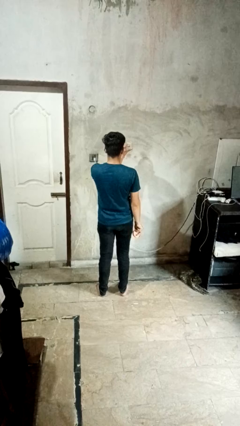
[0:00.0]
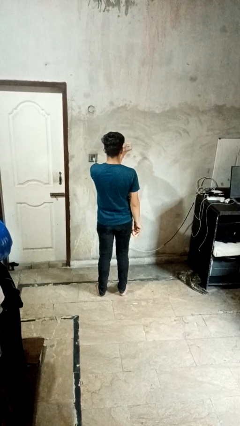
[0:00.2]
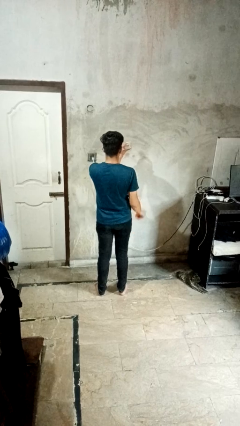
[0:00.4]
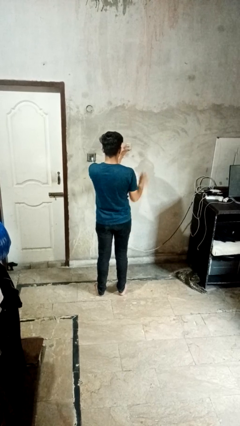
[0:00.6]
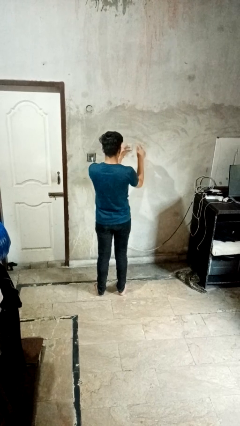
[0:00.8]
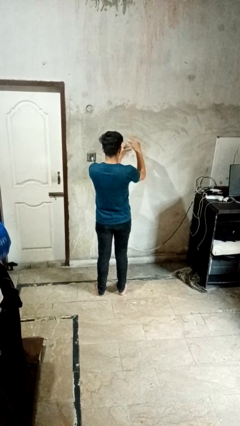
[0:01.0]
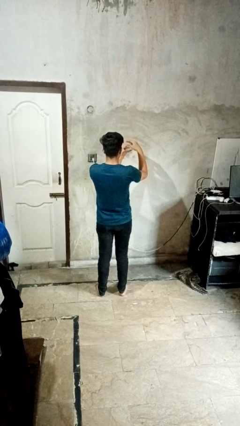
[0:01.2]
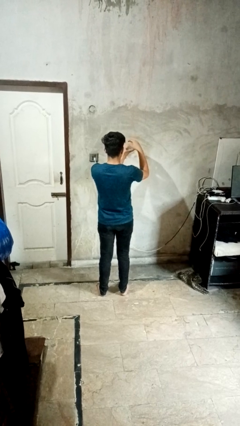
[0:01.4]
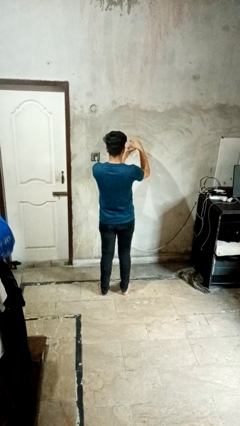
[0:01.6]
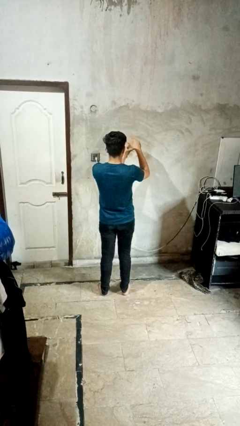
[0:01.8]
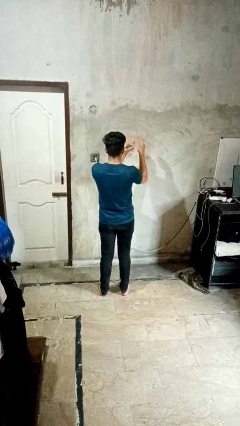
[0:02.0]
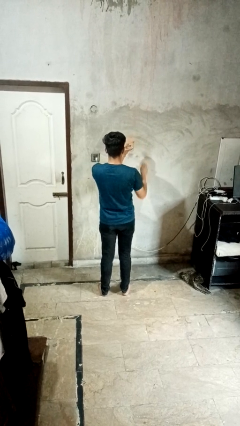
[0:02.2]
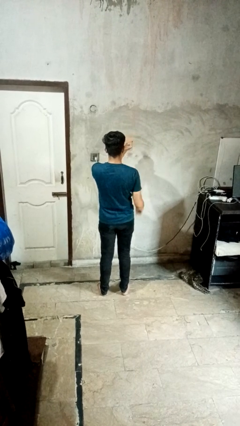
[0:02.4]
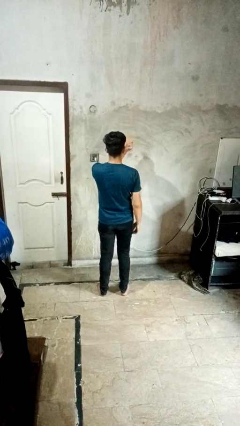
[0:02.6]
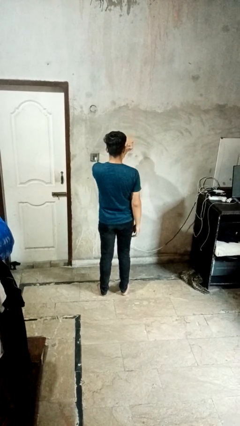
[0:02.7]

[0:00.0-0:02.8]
person closes jar

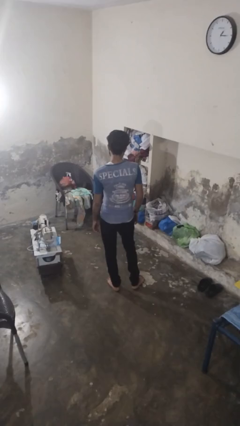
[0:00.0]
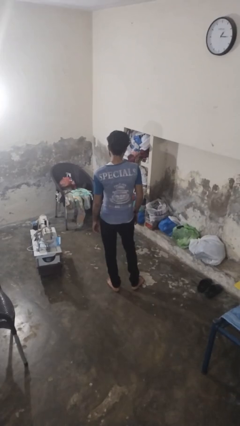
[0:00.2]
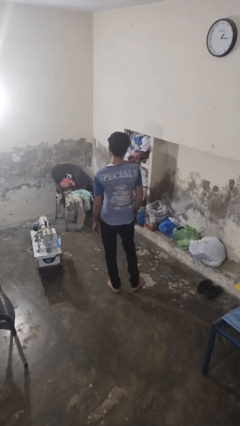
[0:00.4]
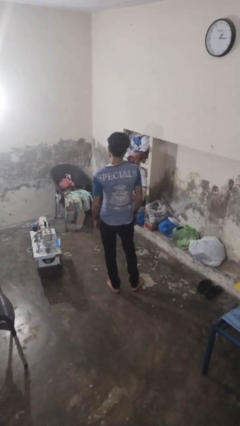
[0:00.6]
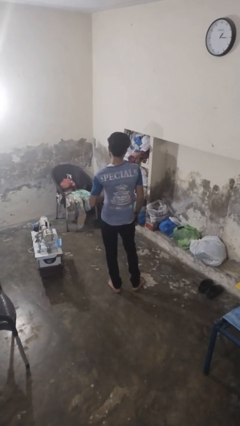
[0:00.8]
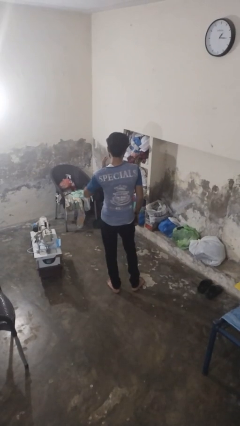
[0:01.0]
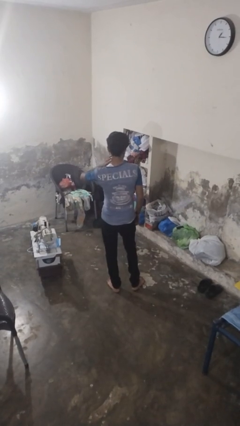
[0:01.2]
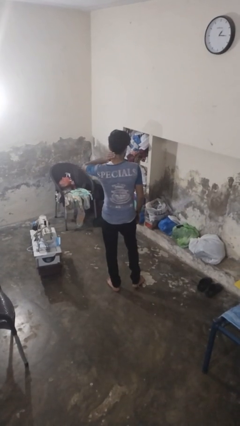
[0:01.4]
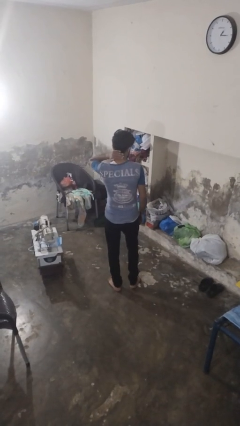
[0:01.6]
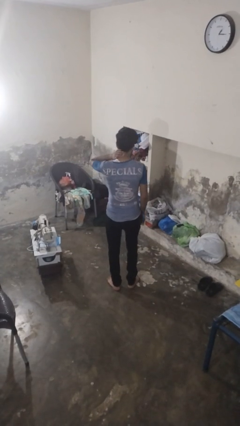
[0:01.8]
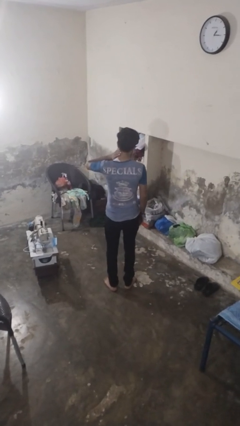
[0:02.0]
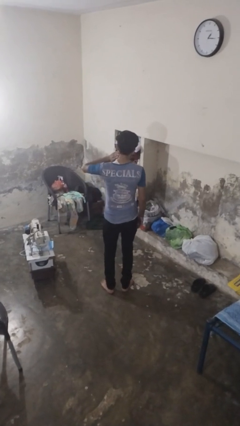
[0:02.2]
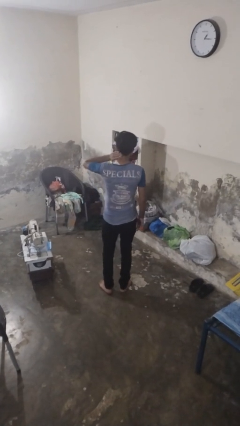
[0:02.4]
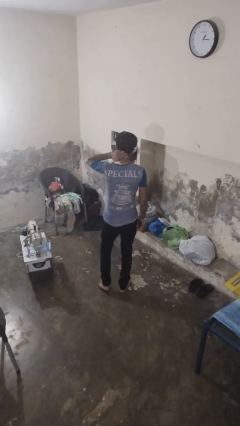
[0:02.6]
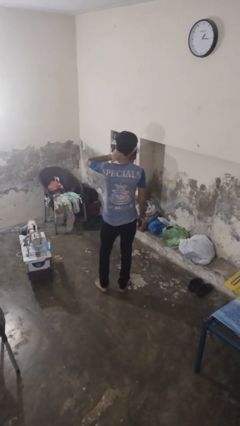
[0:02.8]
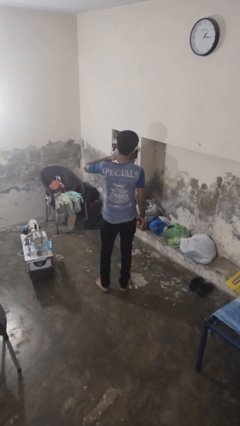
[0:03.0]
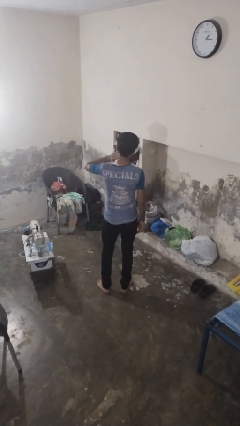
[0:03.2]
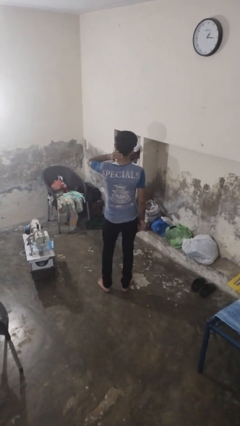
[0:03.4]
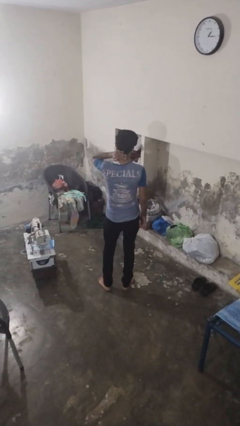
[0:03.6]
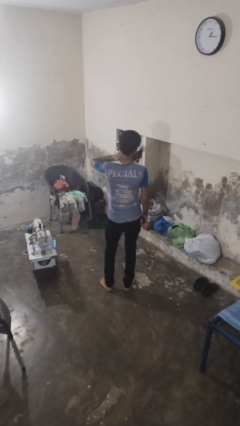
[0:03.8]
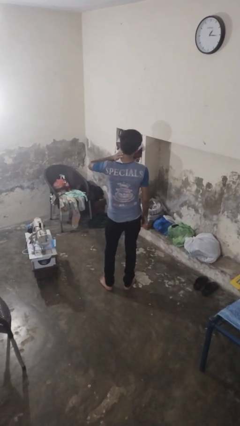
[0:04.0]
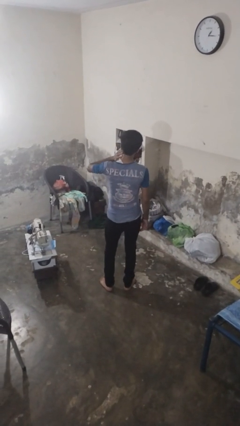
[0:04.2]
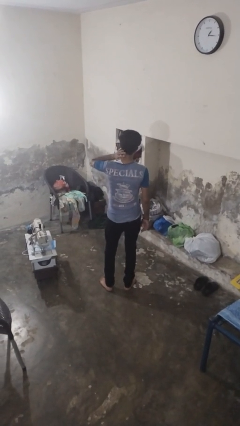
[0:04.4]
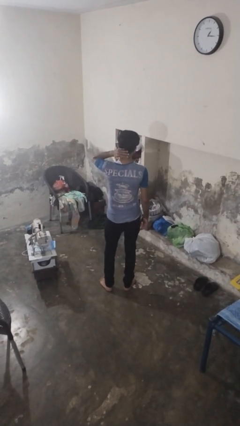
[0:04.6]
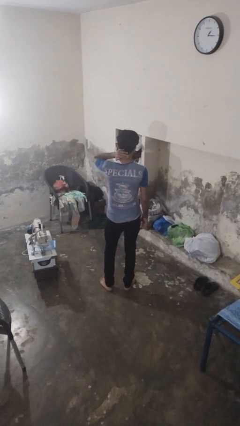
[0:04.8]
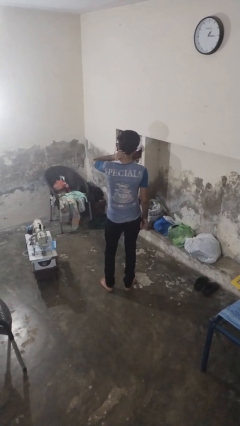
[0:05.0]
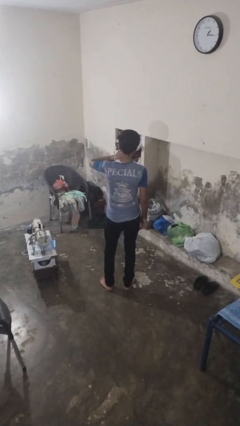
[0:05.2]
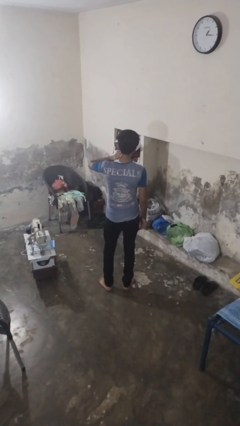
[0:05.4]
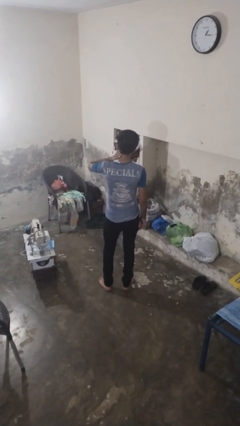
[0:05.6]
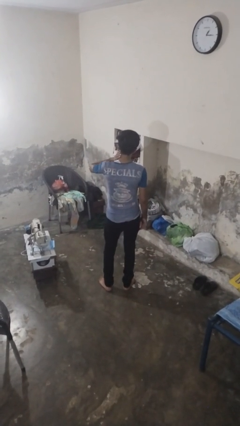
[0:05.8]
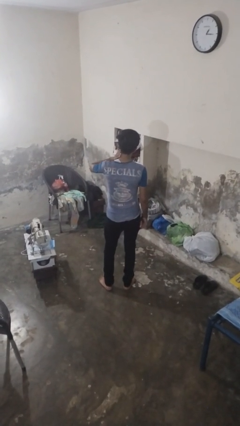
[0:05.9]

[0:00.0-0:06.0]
person rubs neck

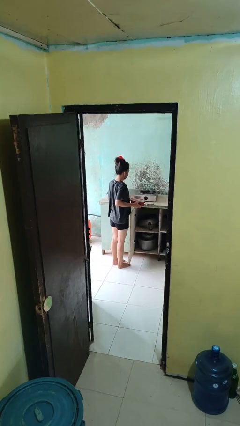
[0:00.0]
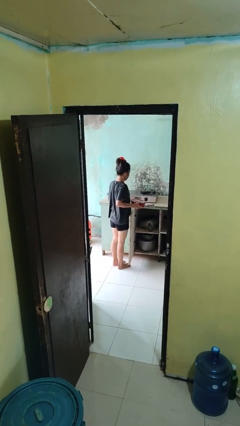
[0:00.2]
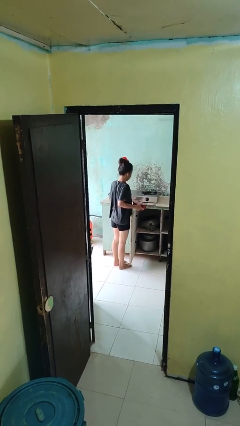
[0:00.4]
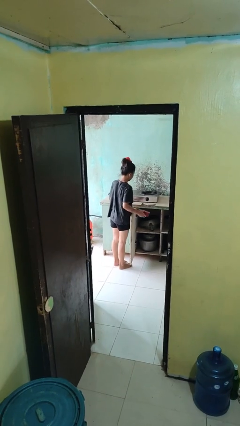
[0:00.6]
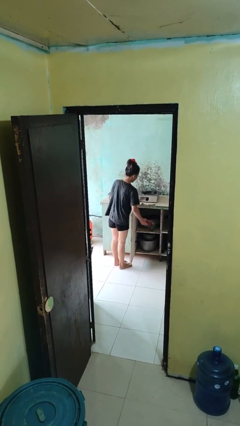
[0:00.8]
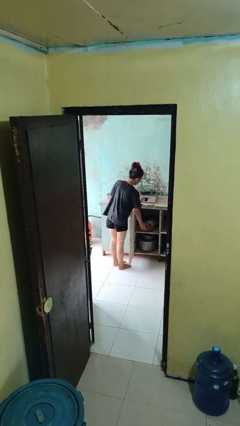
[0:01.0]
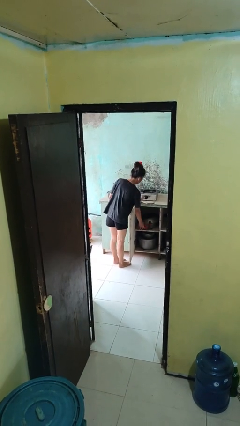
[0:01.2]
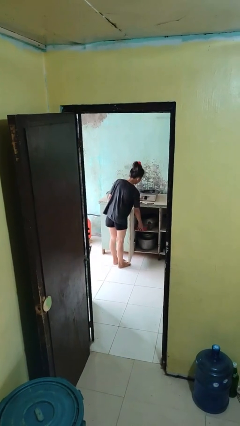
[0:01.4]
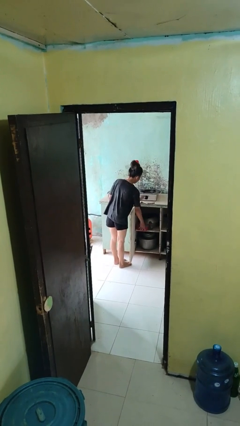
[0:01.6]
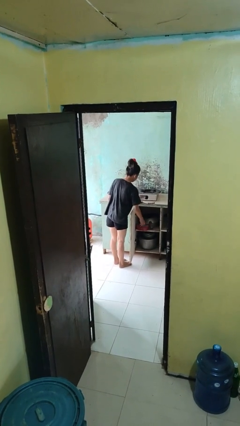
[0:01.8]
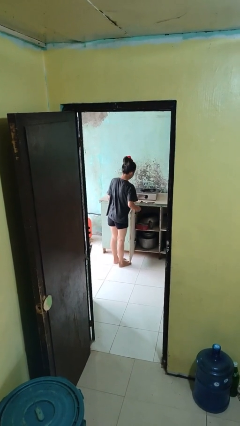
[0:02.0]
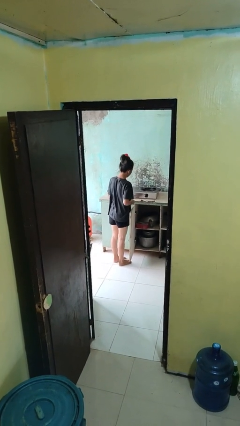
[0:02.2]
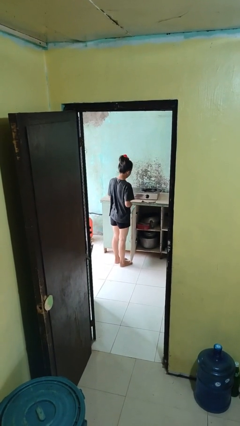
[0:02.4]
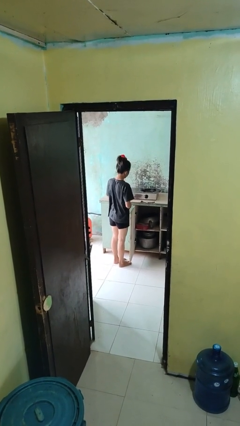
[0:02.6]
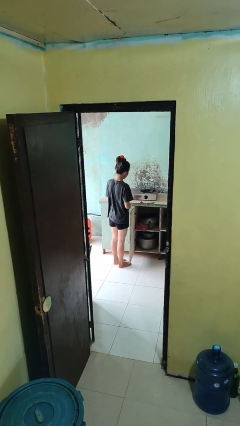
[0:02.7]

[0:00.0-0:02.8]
person puts object in cabinet

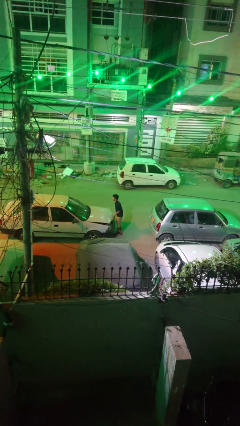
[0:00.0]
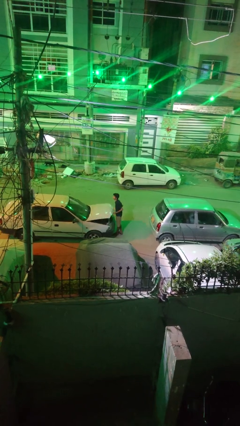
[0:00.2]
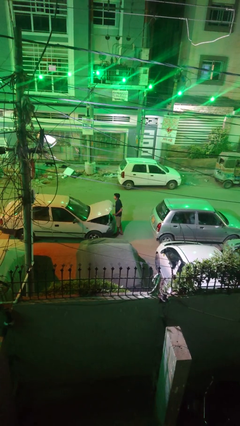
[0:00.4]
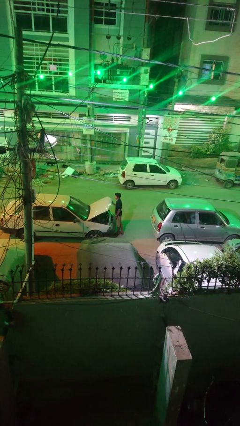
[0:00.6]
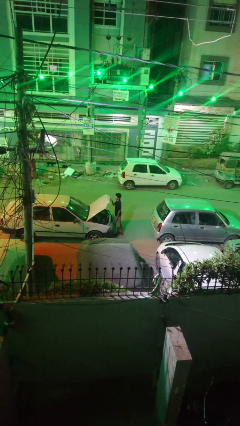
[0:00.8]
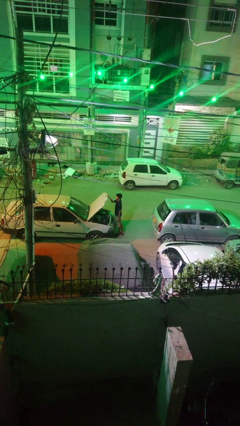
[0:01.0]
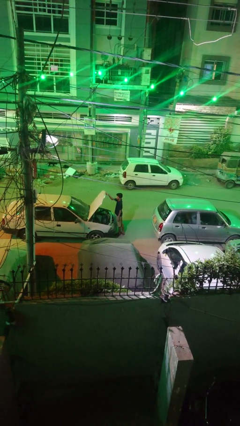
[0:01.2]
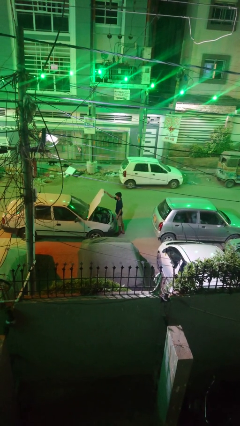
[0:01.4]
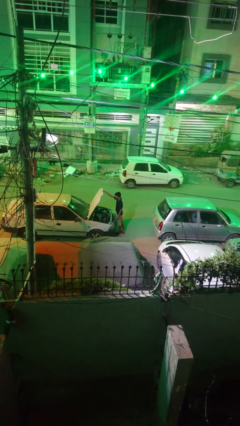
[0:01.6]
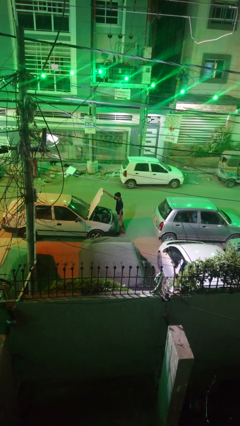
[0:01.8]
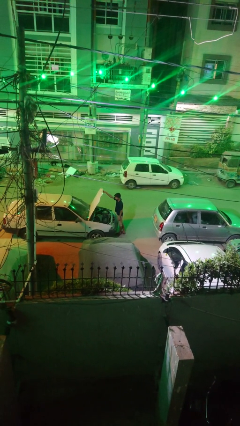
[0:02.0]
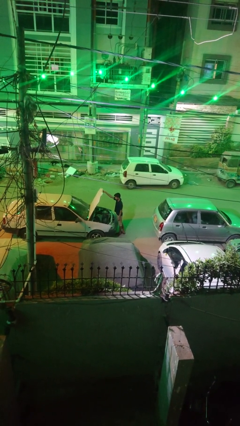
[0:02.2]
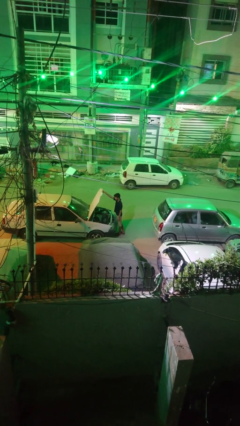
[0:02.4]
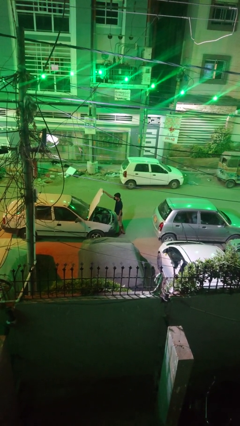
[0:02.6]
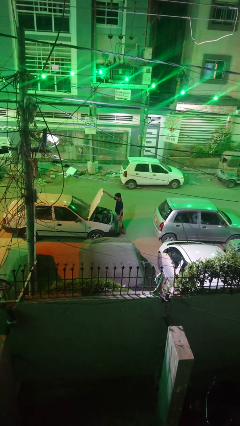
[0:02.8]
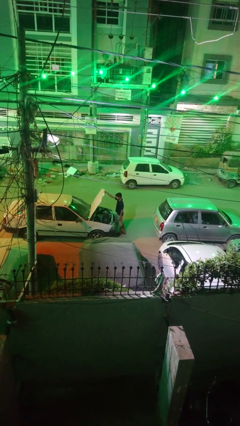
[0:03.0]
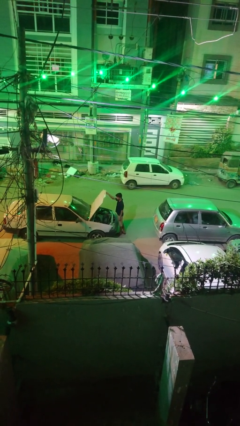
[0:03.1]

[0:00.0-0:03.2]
person opens car hood

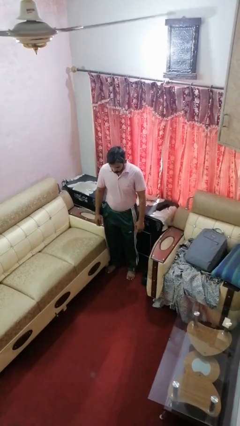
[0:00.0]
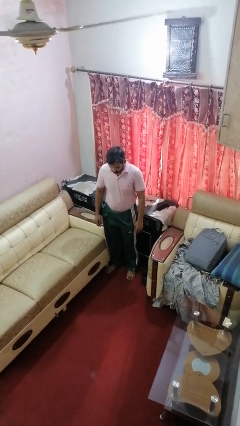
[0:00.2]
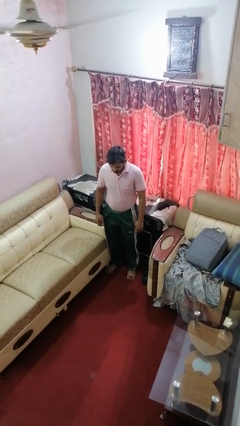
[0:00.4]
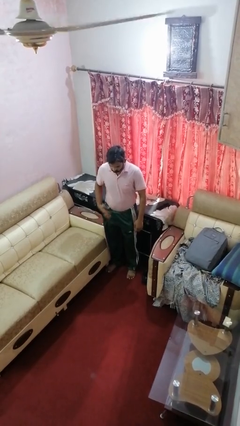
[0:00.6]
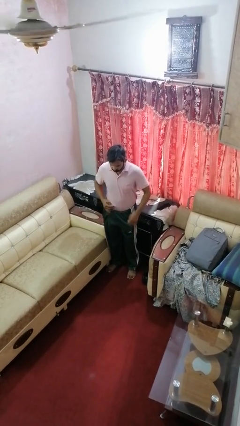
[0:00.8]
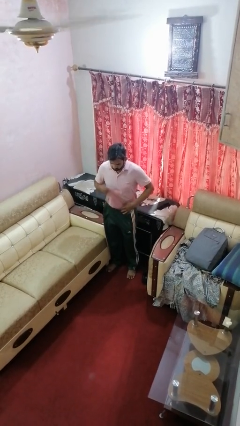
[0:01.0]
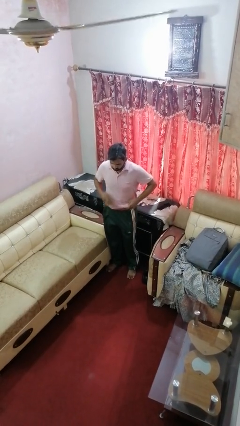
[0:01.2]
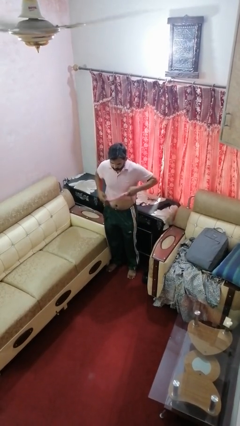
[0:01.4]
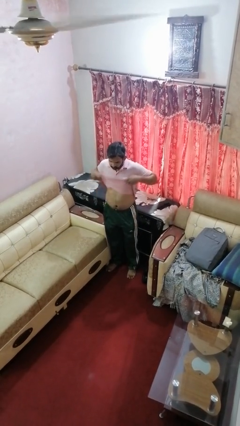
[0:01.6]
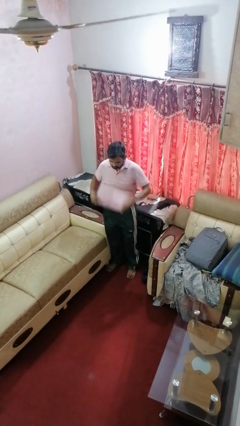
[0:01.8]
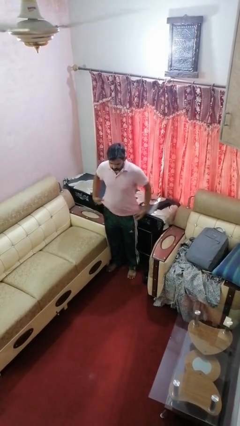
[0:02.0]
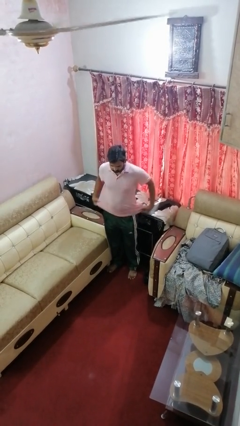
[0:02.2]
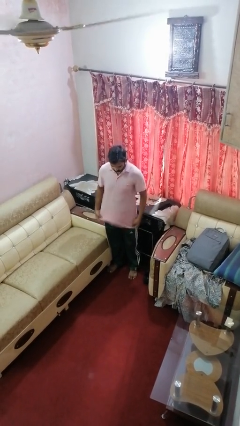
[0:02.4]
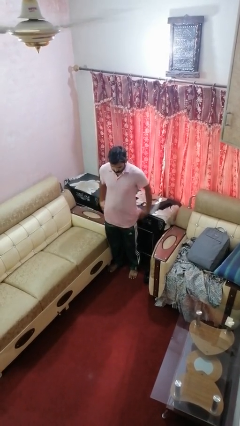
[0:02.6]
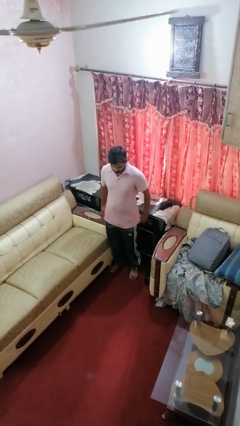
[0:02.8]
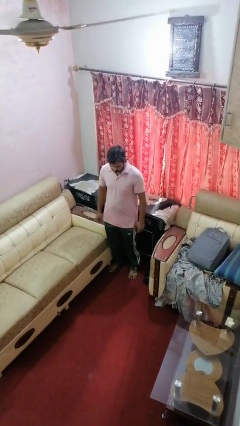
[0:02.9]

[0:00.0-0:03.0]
person untucks shirt
